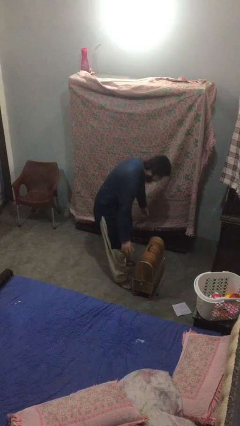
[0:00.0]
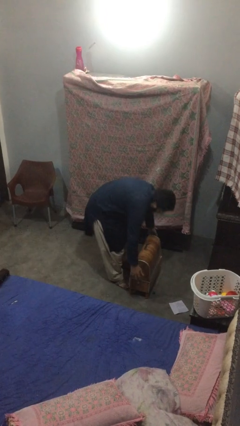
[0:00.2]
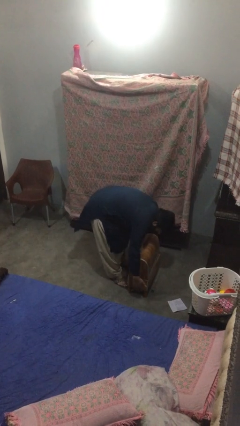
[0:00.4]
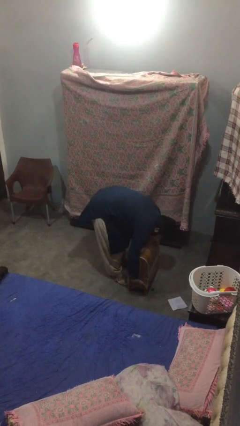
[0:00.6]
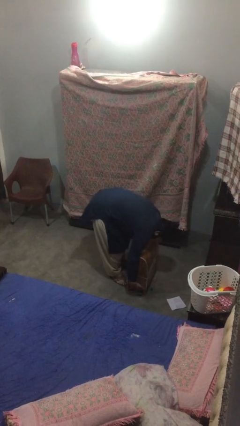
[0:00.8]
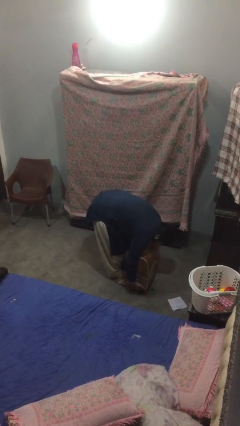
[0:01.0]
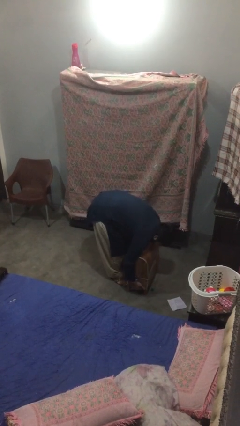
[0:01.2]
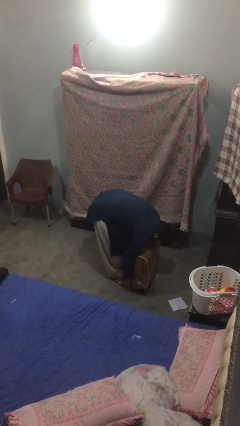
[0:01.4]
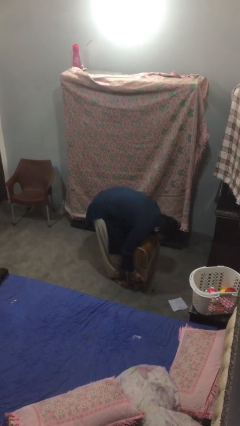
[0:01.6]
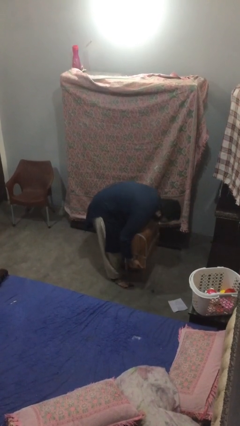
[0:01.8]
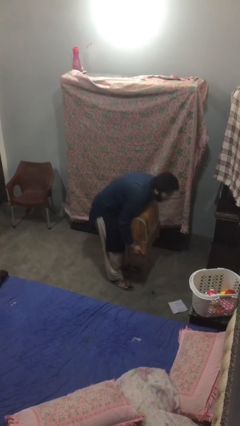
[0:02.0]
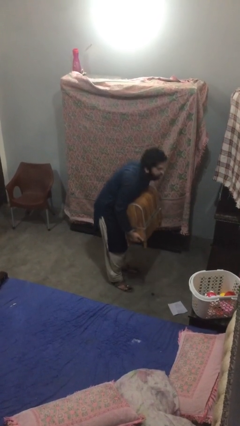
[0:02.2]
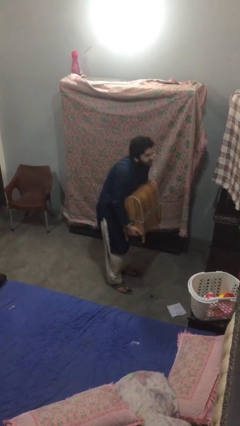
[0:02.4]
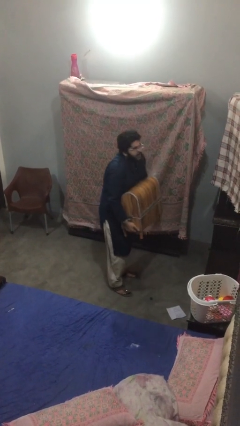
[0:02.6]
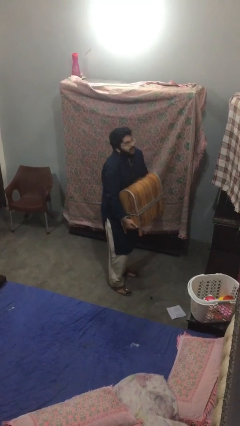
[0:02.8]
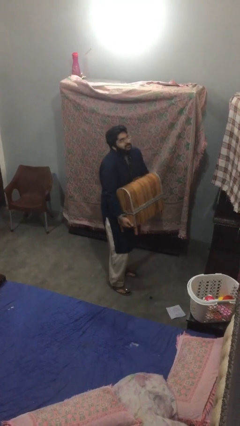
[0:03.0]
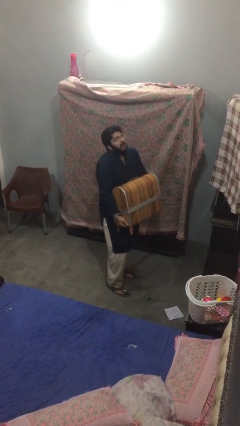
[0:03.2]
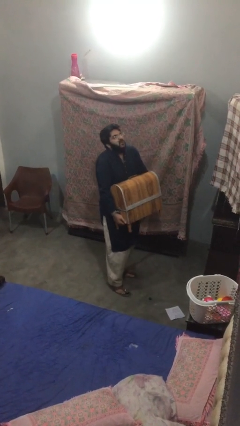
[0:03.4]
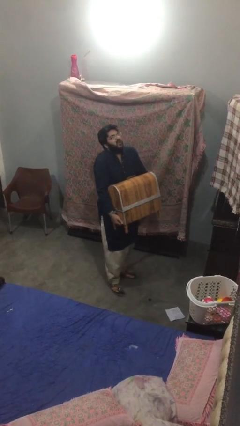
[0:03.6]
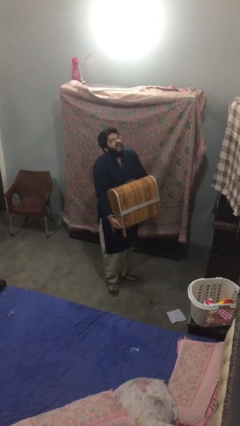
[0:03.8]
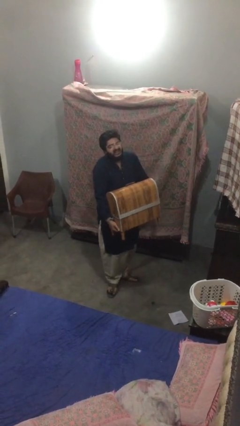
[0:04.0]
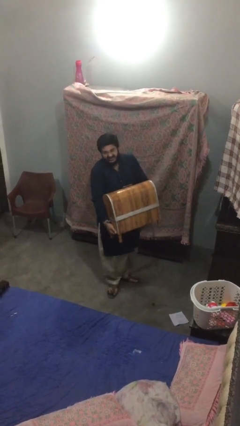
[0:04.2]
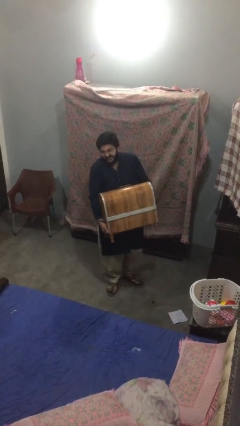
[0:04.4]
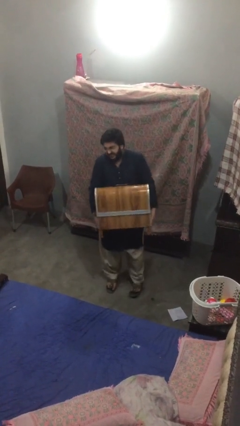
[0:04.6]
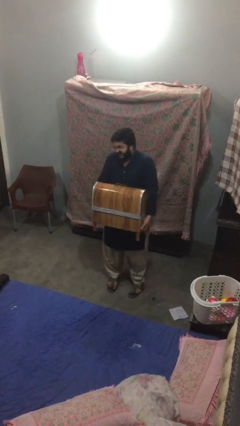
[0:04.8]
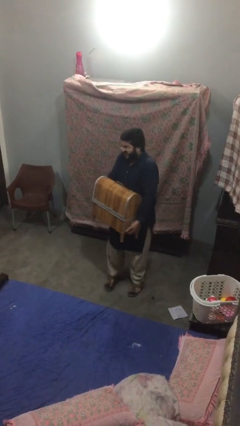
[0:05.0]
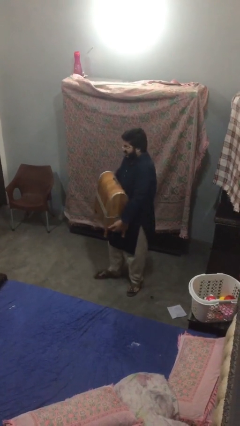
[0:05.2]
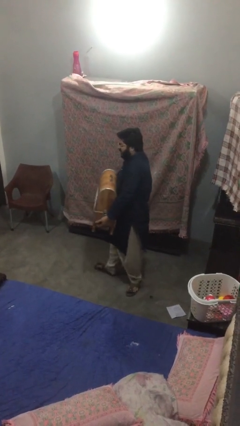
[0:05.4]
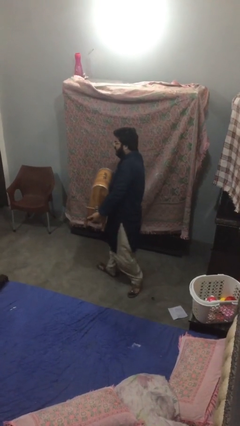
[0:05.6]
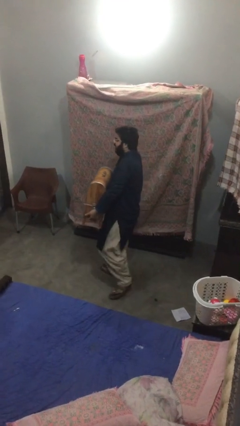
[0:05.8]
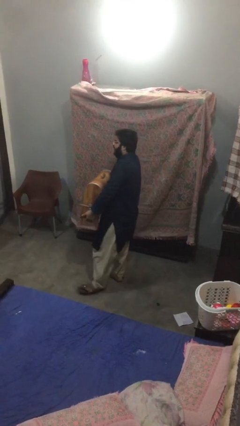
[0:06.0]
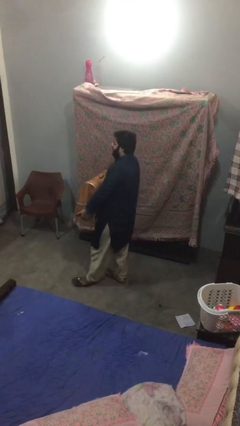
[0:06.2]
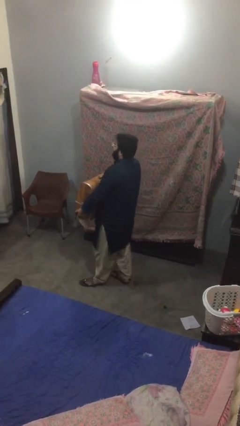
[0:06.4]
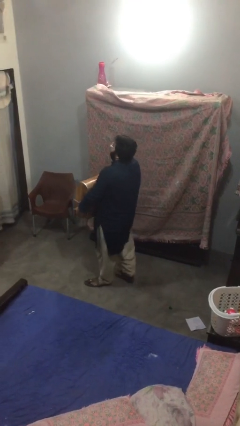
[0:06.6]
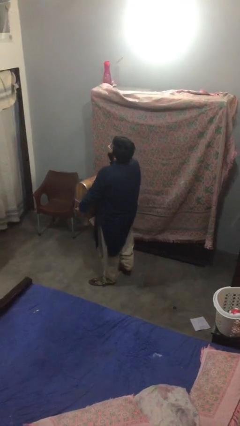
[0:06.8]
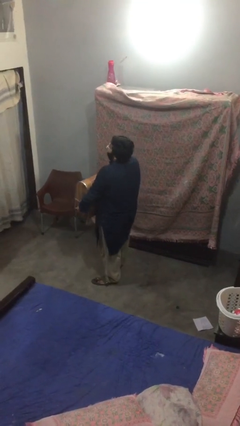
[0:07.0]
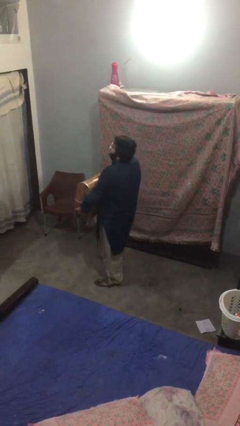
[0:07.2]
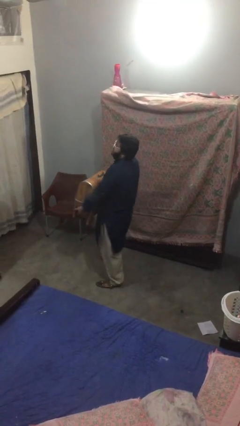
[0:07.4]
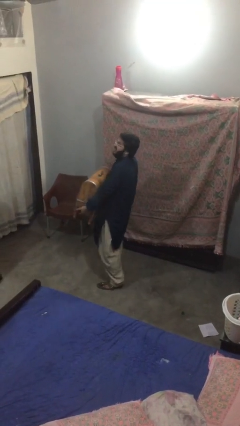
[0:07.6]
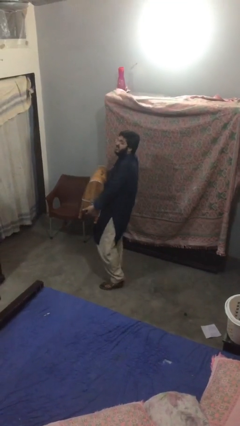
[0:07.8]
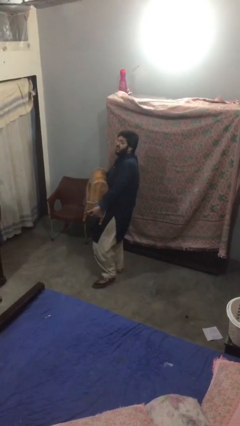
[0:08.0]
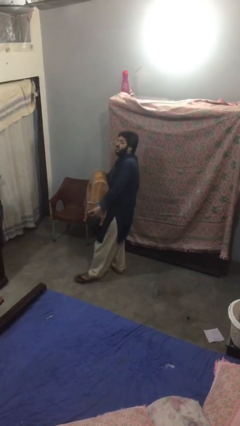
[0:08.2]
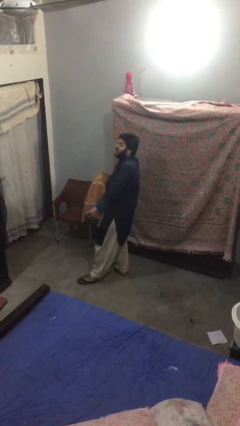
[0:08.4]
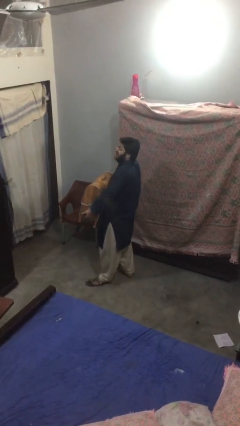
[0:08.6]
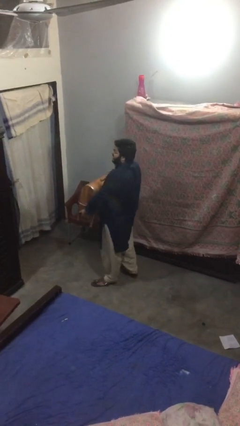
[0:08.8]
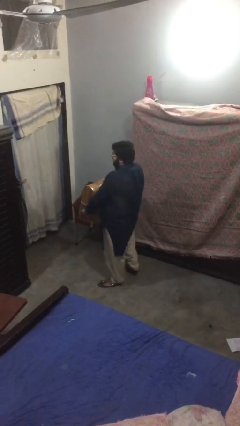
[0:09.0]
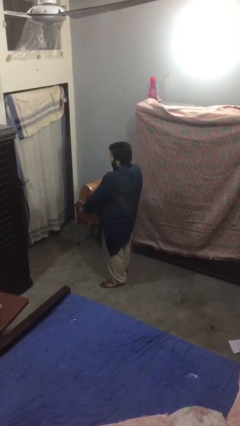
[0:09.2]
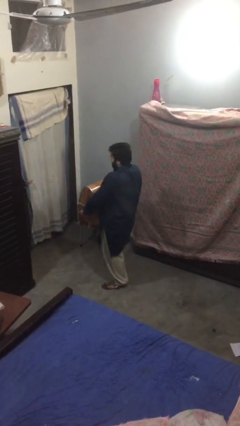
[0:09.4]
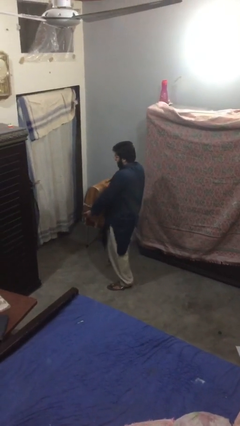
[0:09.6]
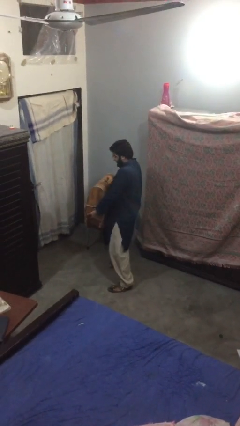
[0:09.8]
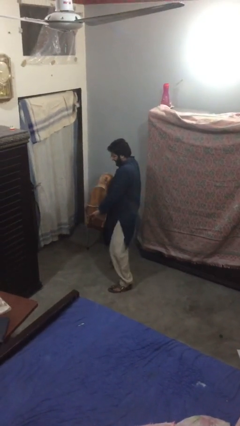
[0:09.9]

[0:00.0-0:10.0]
person carries heavy object

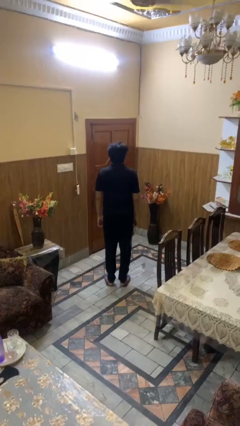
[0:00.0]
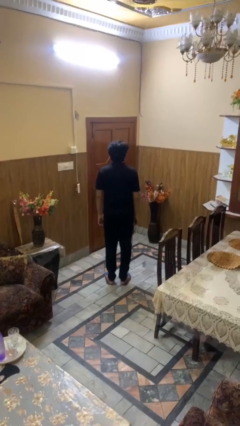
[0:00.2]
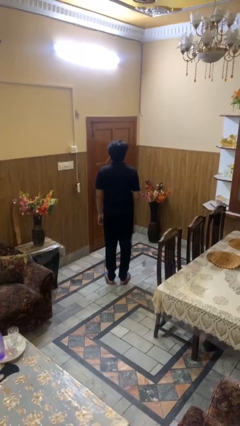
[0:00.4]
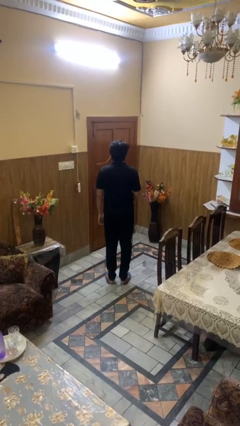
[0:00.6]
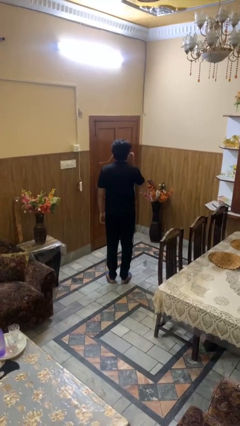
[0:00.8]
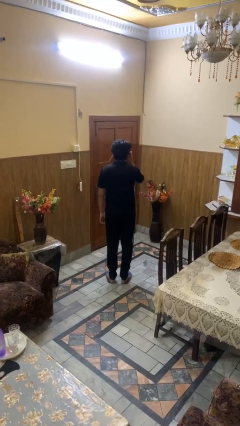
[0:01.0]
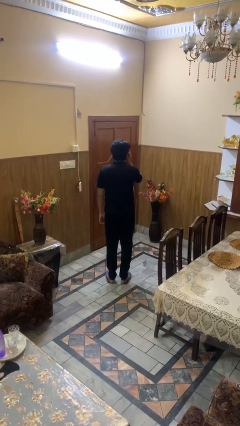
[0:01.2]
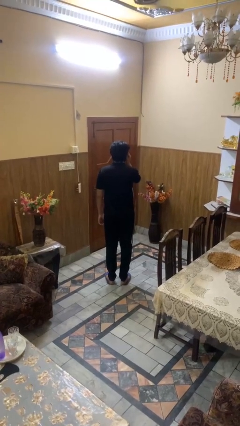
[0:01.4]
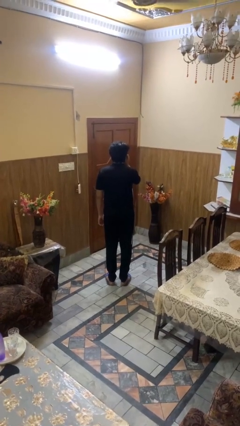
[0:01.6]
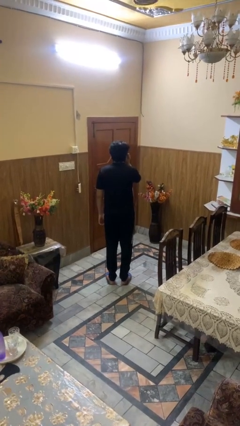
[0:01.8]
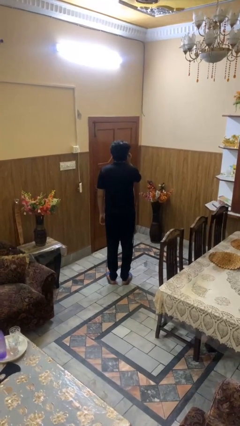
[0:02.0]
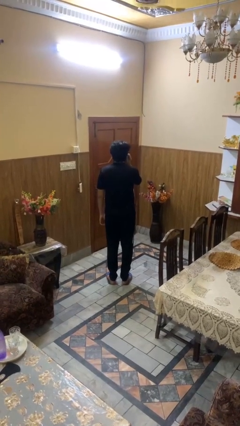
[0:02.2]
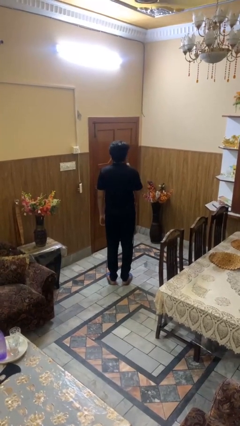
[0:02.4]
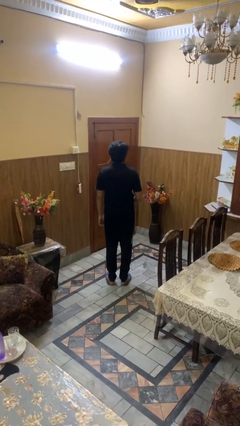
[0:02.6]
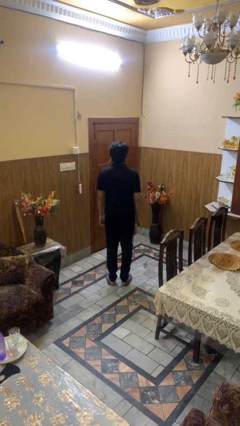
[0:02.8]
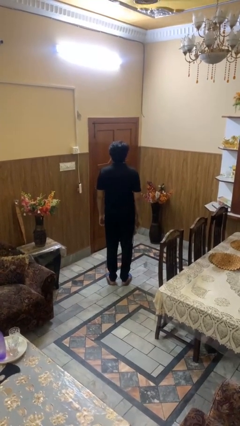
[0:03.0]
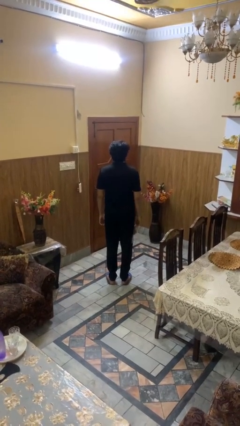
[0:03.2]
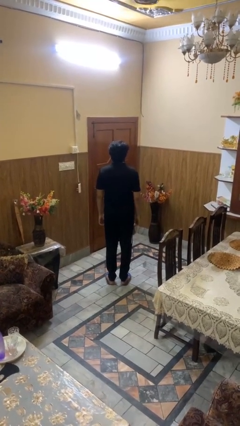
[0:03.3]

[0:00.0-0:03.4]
person touches earlobe

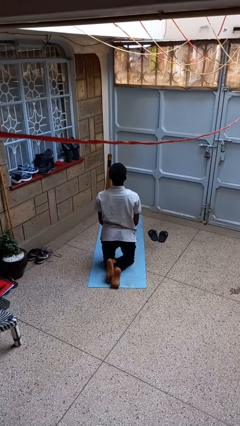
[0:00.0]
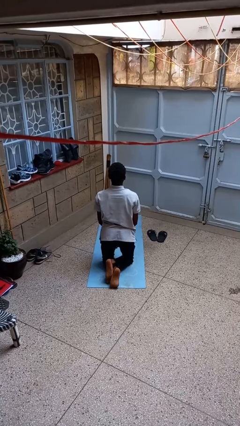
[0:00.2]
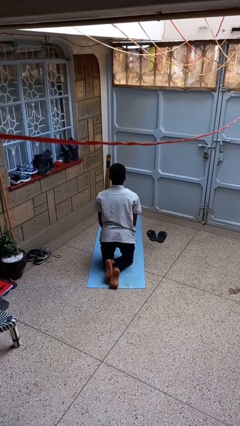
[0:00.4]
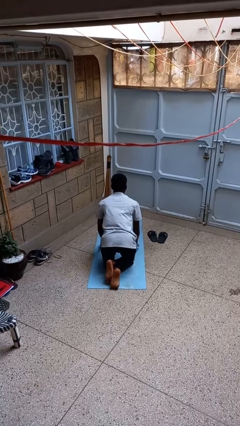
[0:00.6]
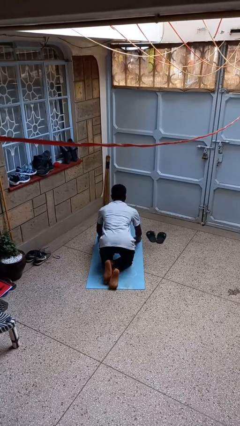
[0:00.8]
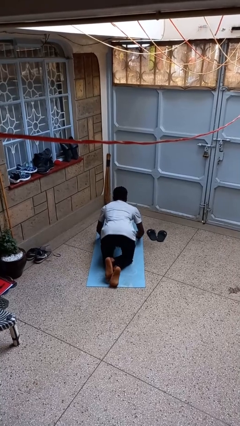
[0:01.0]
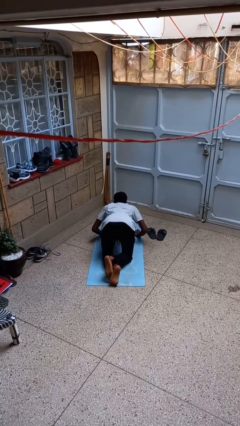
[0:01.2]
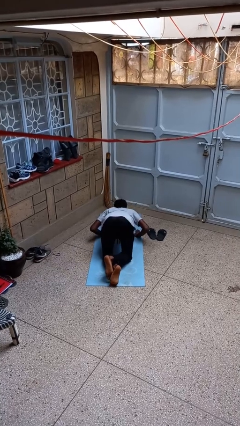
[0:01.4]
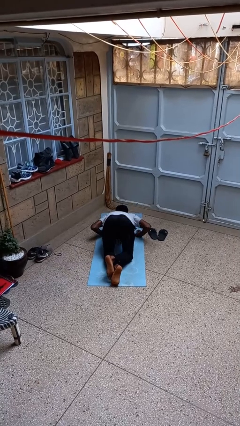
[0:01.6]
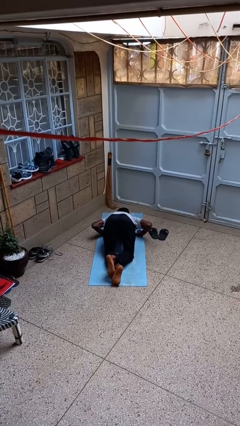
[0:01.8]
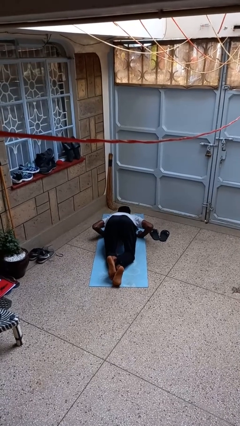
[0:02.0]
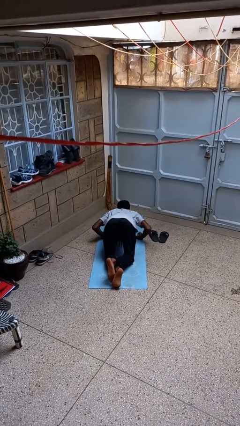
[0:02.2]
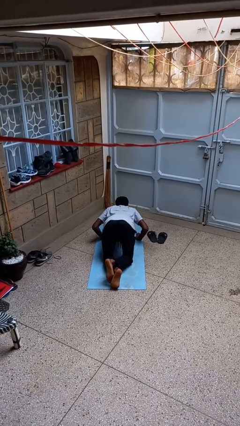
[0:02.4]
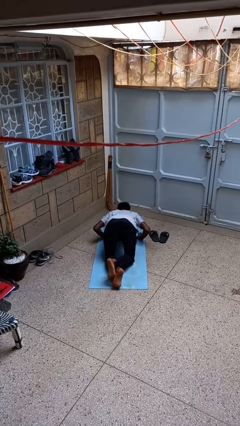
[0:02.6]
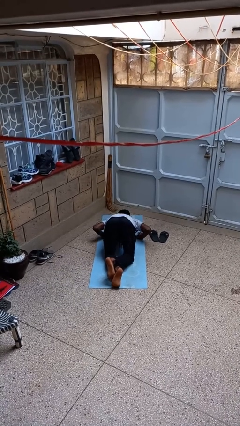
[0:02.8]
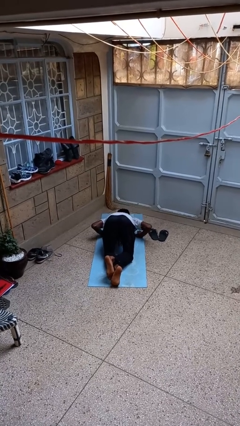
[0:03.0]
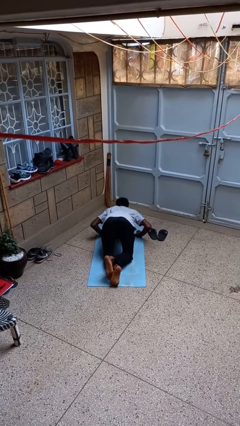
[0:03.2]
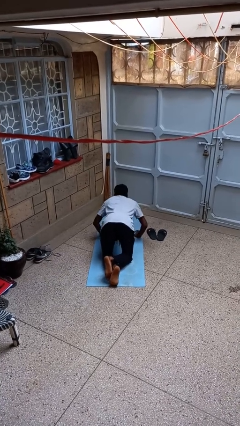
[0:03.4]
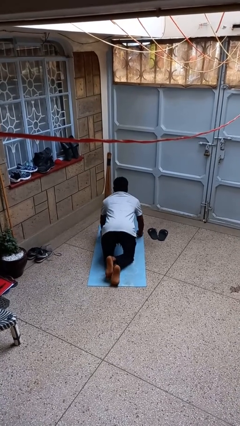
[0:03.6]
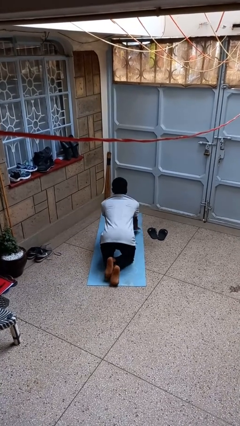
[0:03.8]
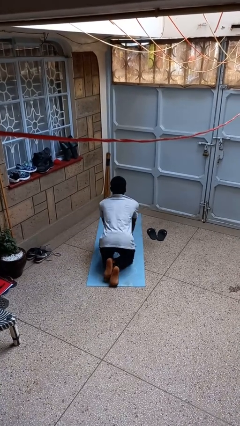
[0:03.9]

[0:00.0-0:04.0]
person exercises with pushup

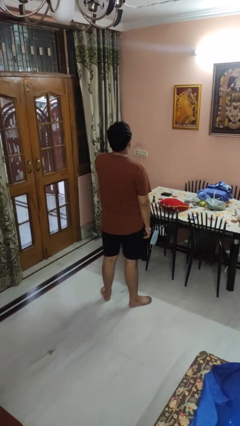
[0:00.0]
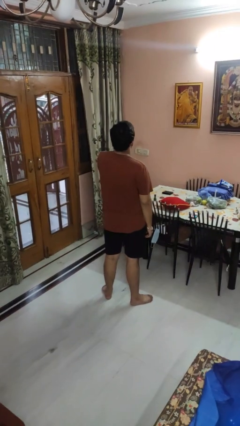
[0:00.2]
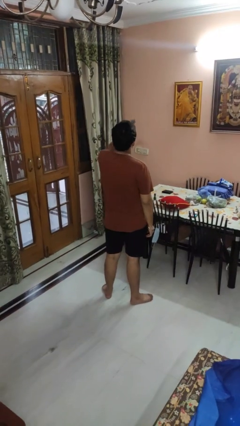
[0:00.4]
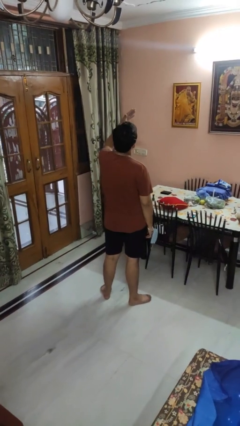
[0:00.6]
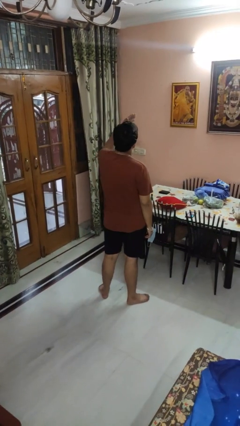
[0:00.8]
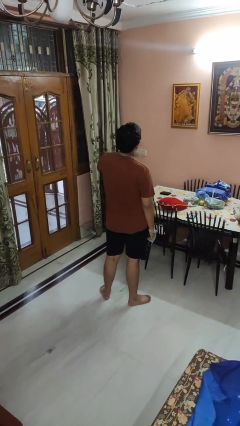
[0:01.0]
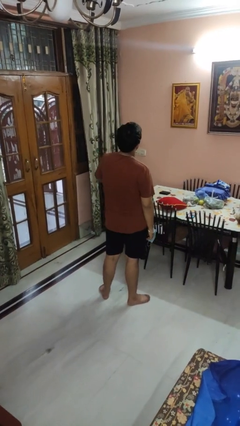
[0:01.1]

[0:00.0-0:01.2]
person gestures blow kiss
